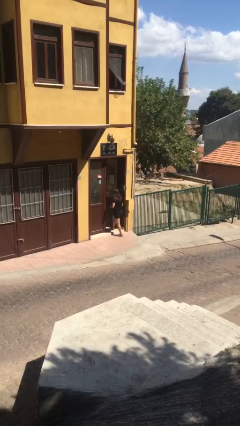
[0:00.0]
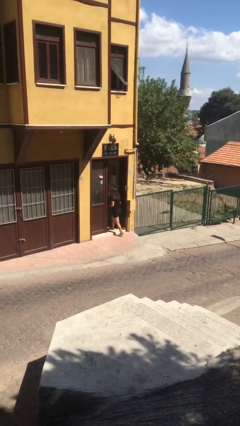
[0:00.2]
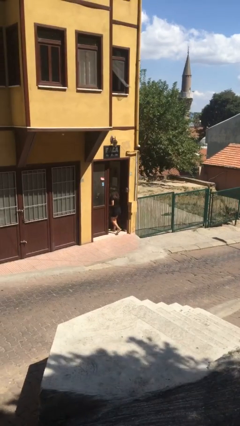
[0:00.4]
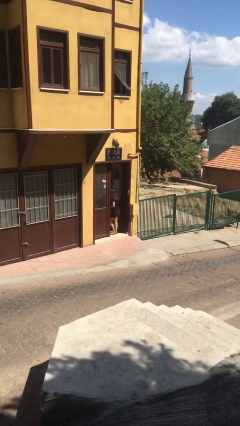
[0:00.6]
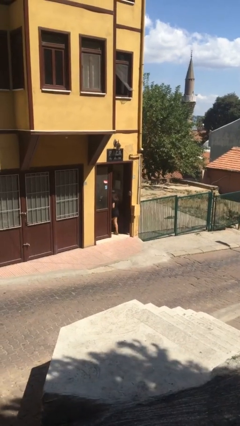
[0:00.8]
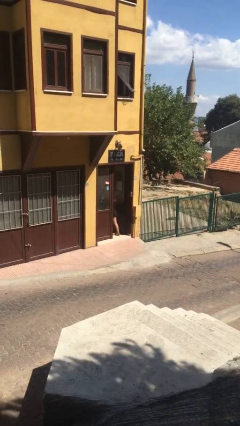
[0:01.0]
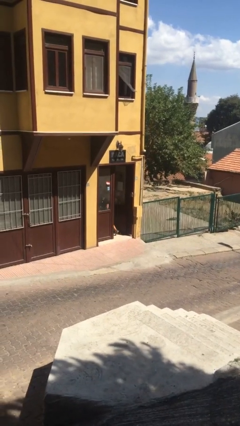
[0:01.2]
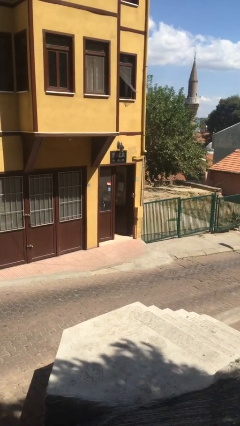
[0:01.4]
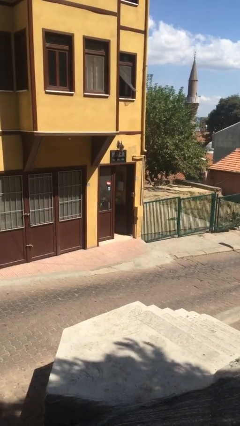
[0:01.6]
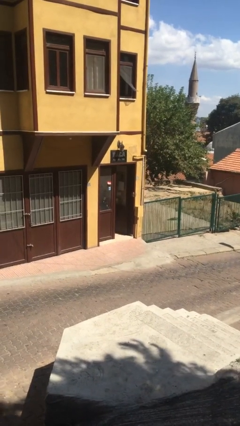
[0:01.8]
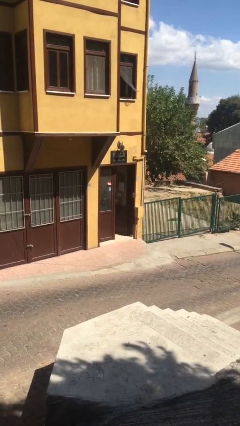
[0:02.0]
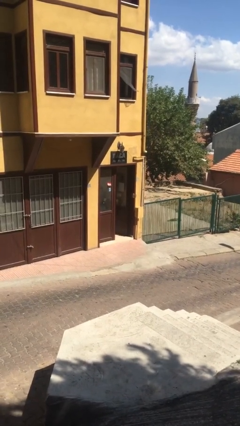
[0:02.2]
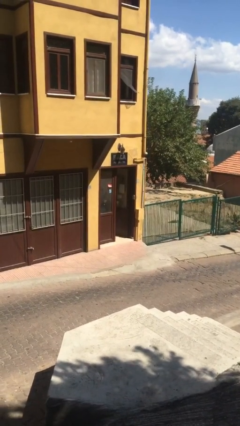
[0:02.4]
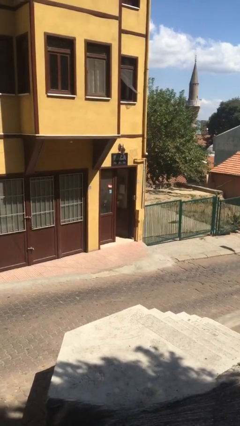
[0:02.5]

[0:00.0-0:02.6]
person exits scene through structure

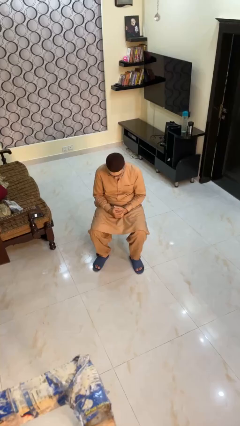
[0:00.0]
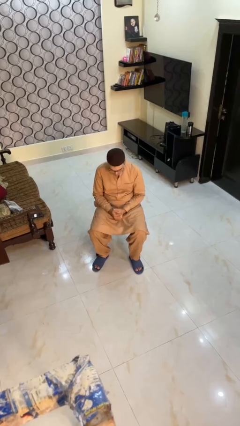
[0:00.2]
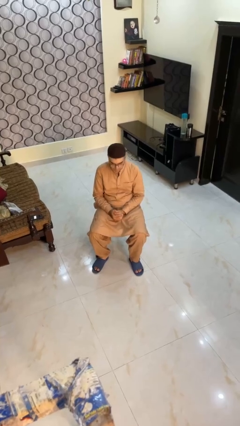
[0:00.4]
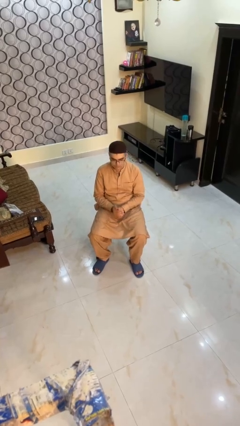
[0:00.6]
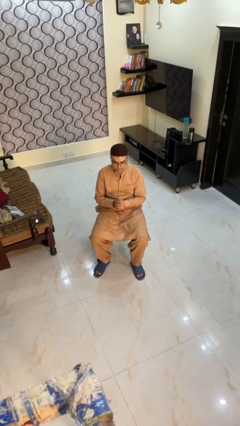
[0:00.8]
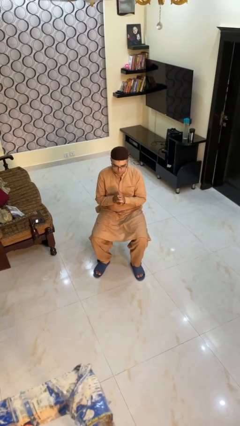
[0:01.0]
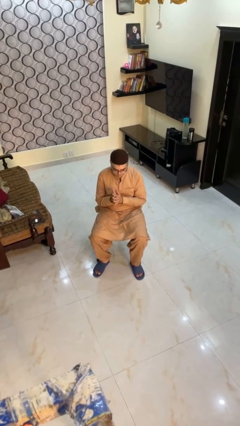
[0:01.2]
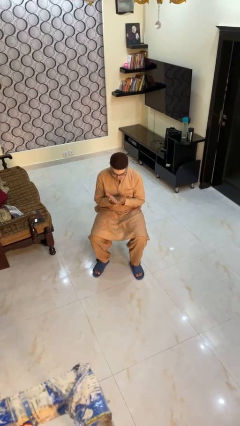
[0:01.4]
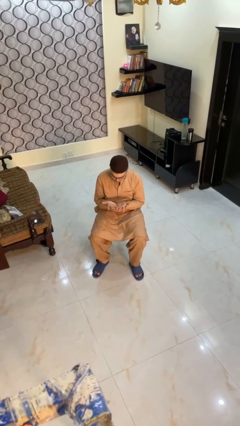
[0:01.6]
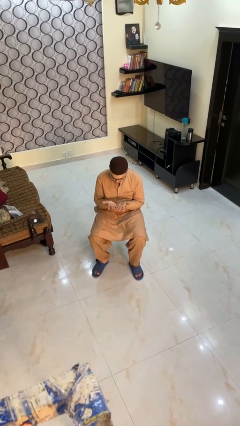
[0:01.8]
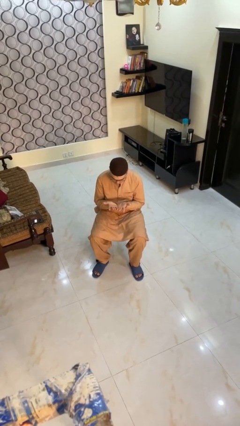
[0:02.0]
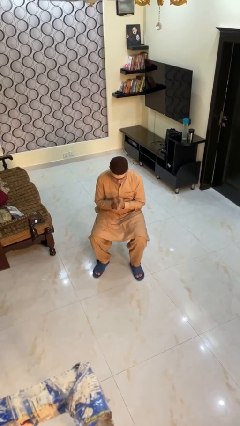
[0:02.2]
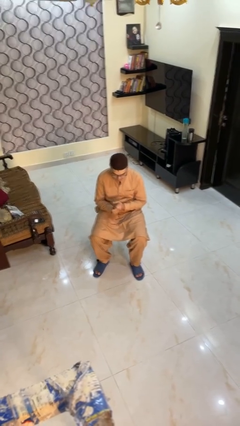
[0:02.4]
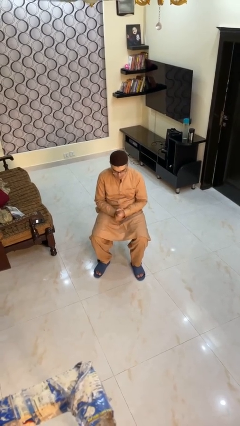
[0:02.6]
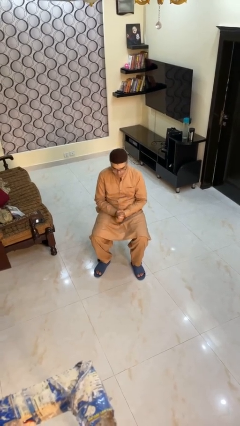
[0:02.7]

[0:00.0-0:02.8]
person looks at hands in lap

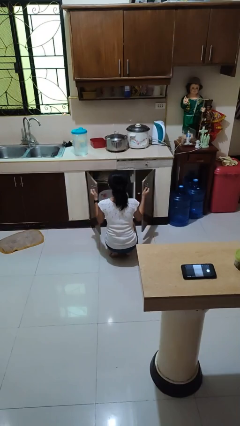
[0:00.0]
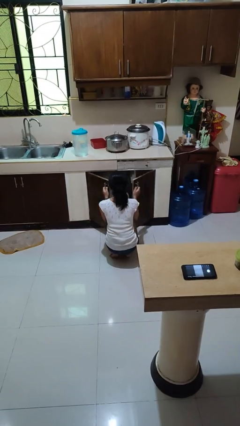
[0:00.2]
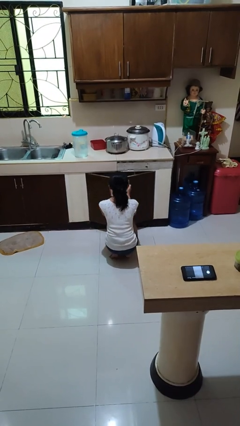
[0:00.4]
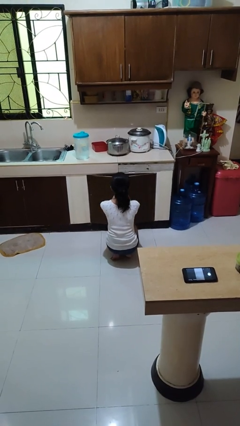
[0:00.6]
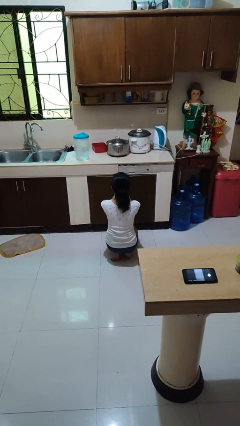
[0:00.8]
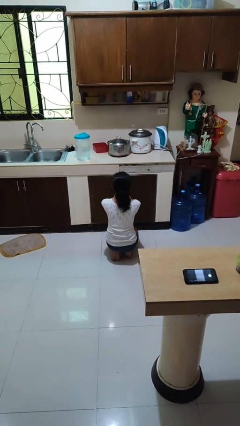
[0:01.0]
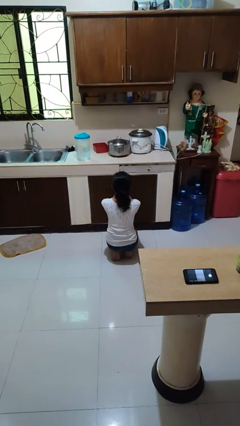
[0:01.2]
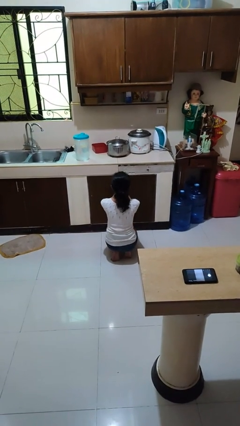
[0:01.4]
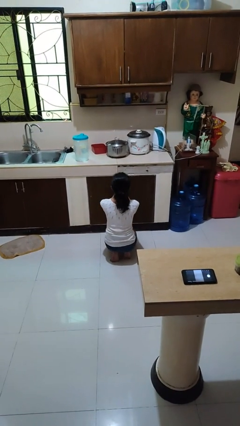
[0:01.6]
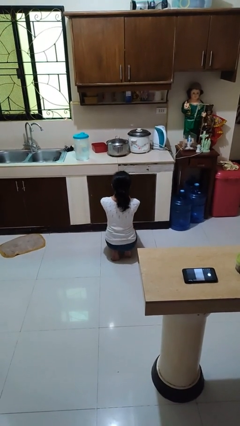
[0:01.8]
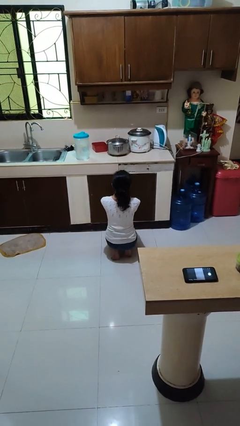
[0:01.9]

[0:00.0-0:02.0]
person closes dishwasher

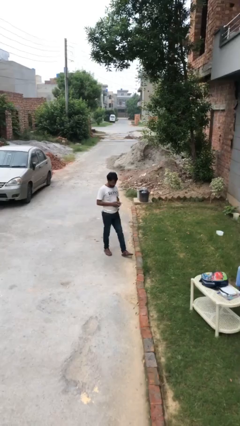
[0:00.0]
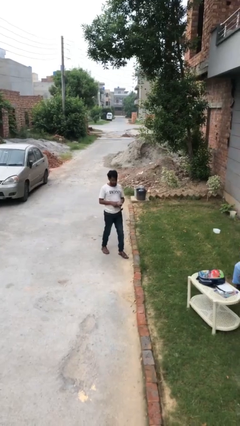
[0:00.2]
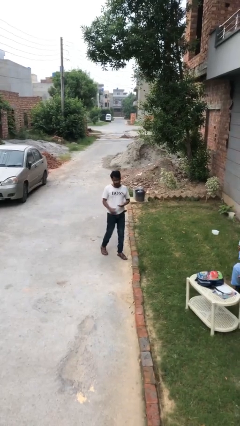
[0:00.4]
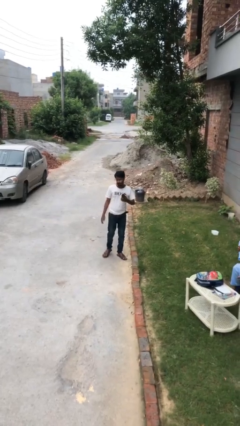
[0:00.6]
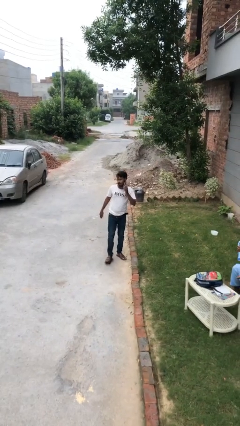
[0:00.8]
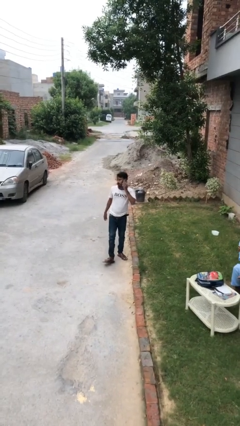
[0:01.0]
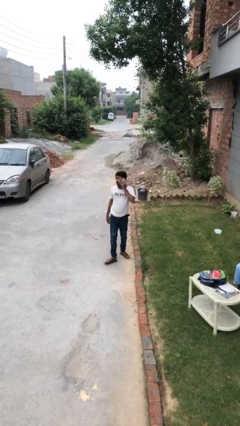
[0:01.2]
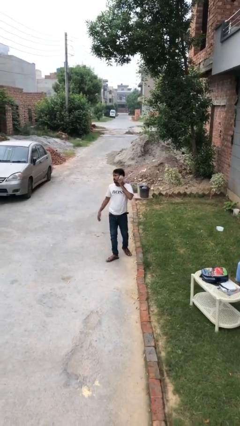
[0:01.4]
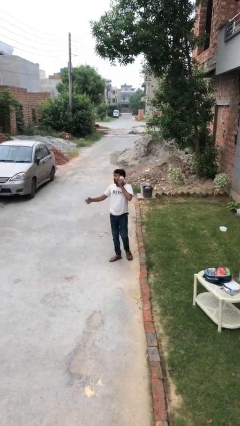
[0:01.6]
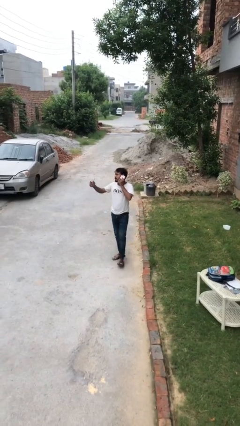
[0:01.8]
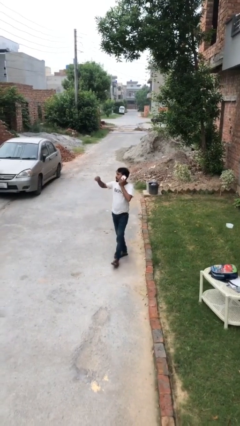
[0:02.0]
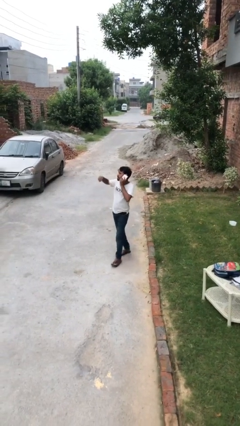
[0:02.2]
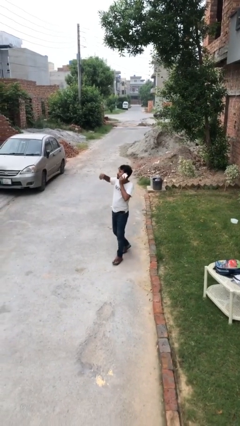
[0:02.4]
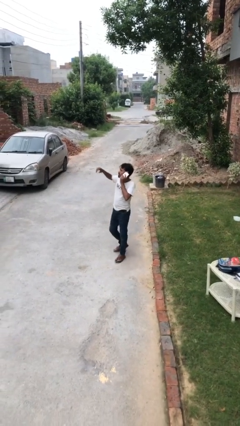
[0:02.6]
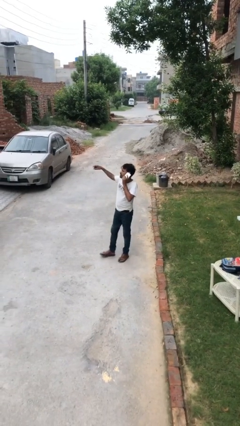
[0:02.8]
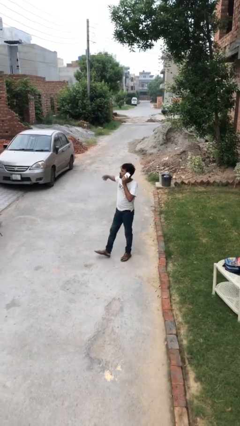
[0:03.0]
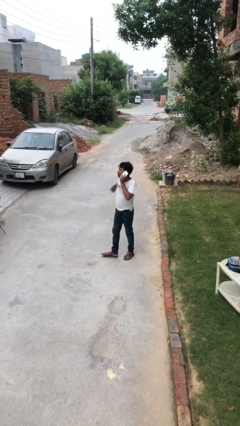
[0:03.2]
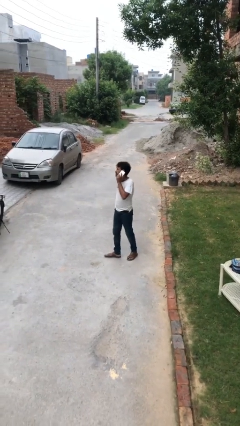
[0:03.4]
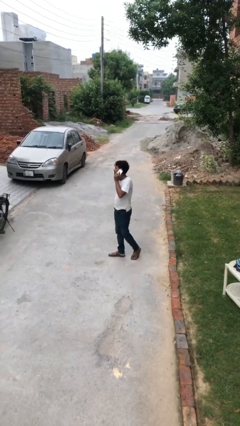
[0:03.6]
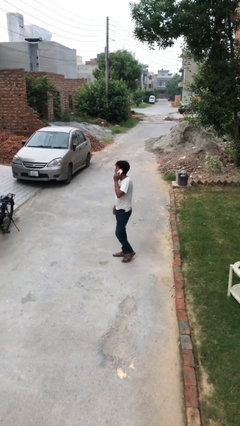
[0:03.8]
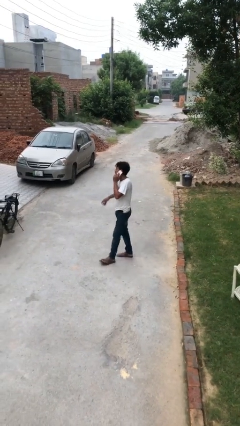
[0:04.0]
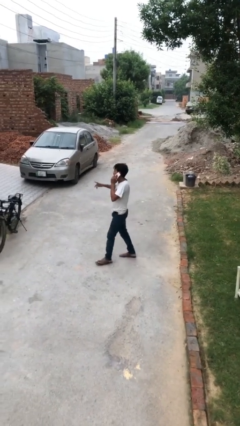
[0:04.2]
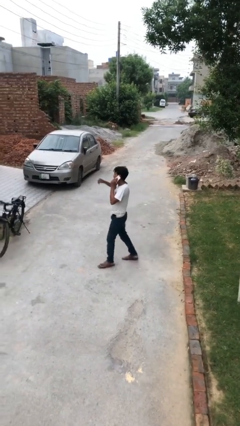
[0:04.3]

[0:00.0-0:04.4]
person talks on phone

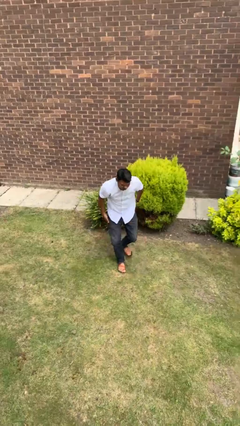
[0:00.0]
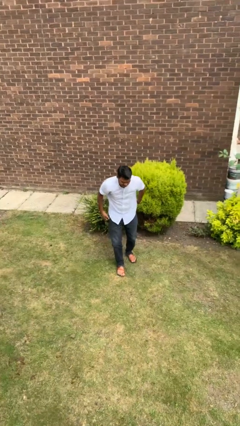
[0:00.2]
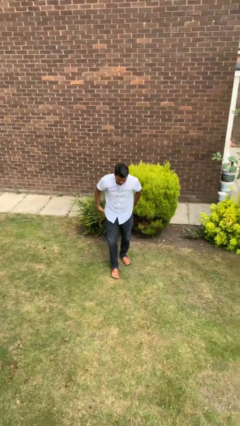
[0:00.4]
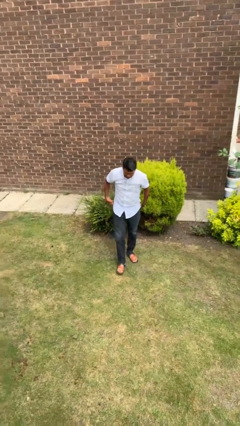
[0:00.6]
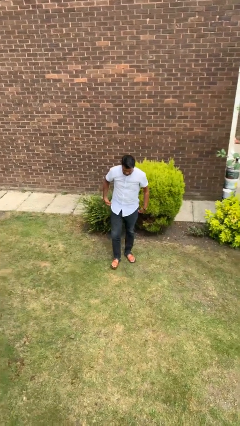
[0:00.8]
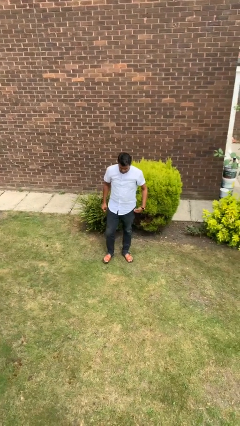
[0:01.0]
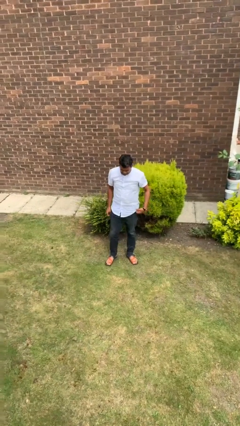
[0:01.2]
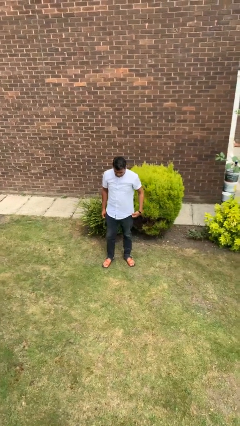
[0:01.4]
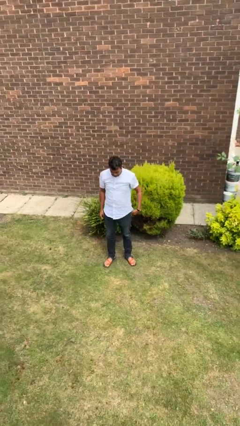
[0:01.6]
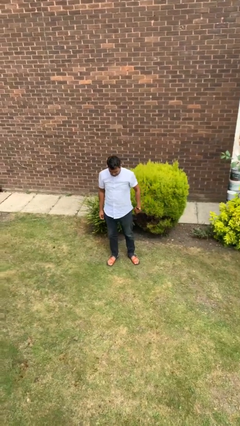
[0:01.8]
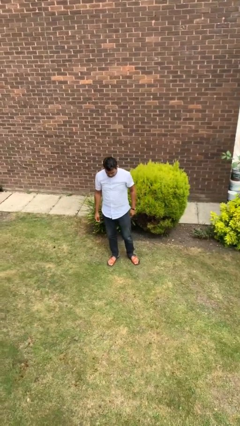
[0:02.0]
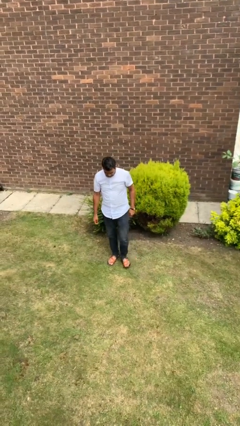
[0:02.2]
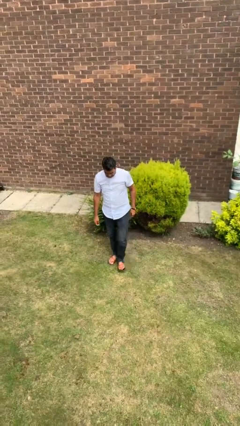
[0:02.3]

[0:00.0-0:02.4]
person stands up from floor

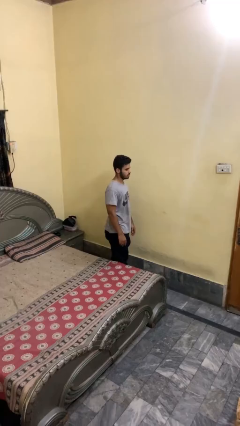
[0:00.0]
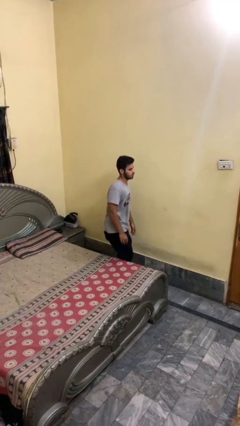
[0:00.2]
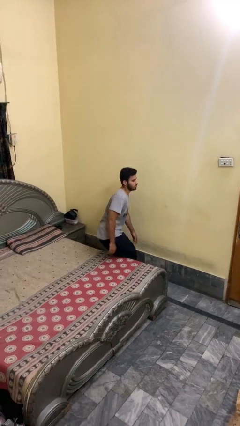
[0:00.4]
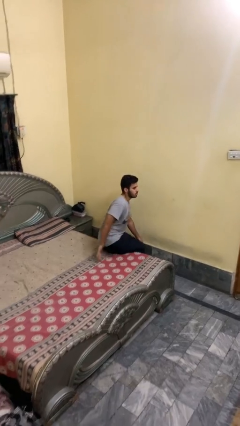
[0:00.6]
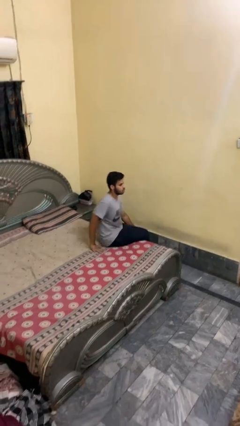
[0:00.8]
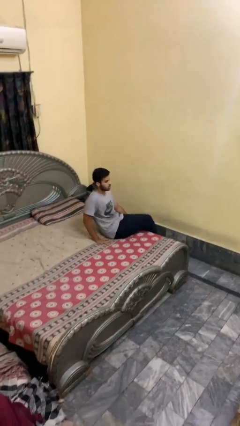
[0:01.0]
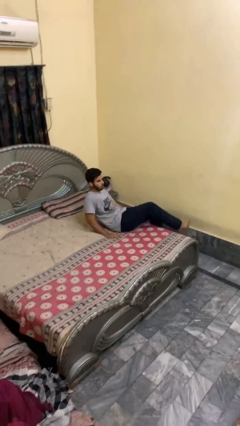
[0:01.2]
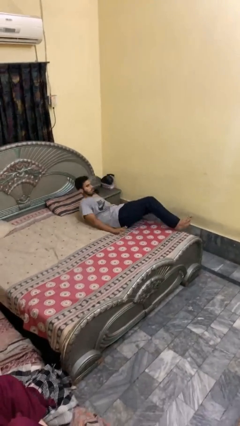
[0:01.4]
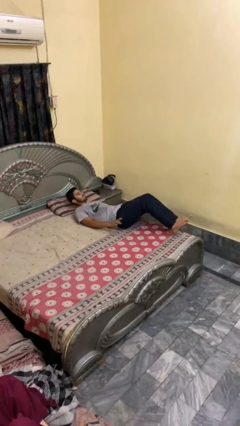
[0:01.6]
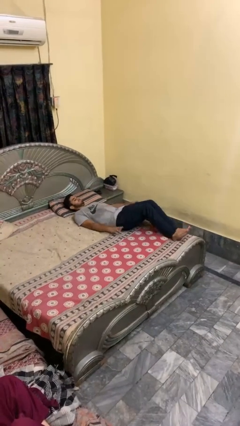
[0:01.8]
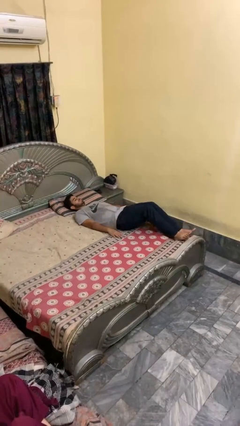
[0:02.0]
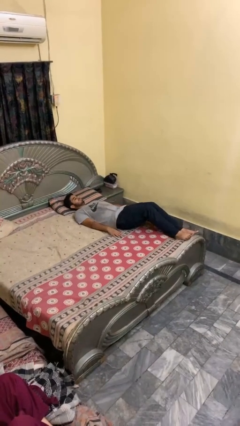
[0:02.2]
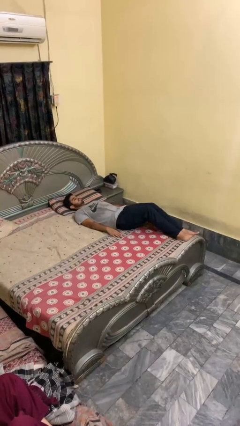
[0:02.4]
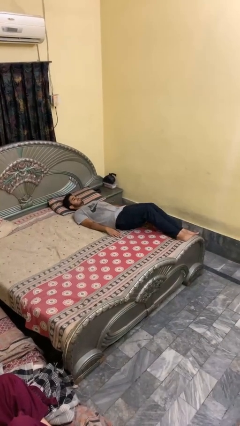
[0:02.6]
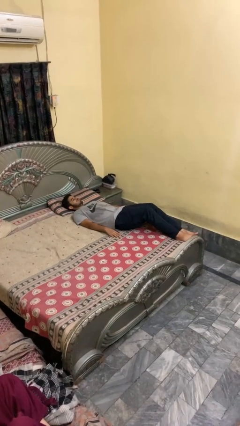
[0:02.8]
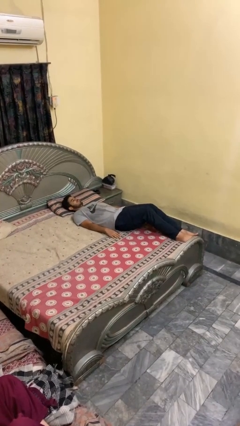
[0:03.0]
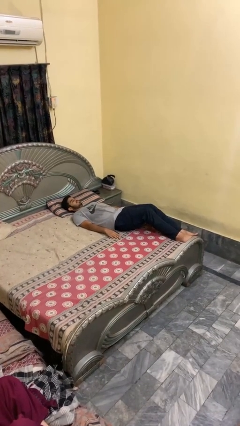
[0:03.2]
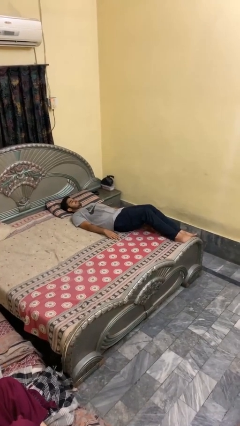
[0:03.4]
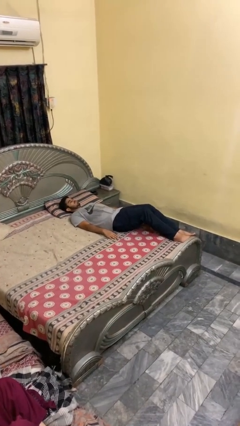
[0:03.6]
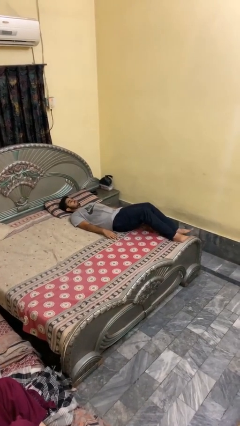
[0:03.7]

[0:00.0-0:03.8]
person lies down on bed
